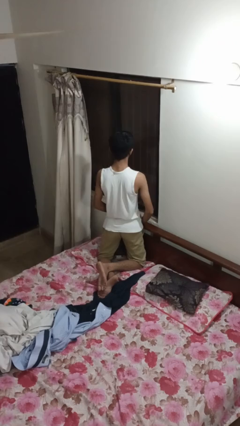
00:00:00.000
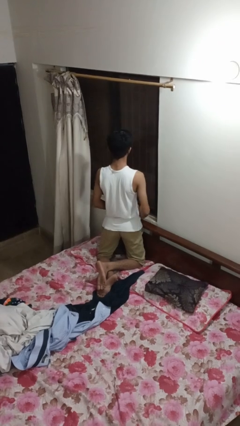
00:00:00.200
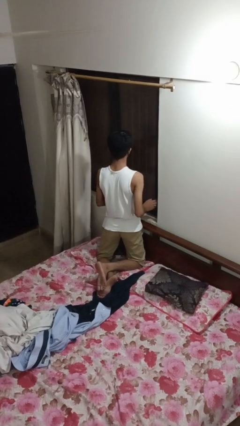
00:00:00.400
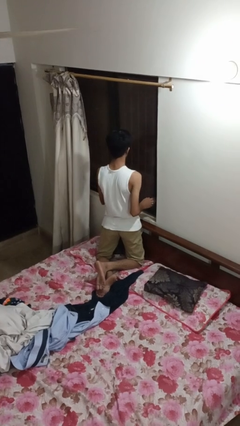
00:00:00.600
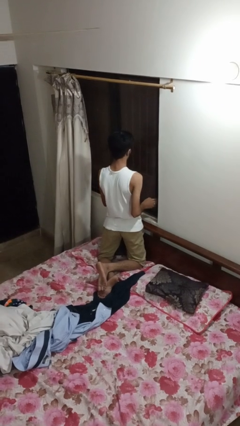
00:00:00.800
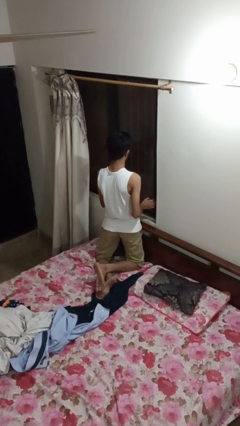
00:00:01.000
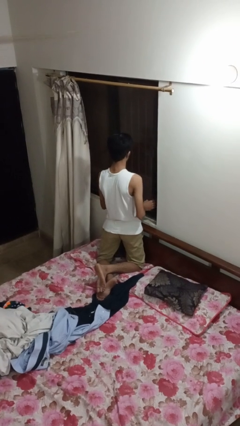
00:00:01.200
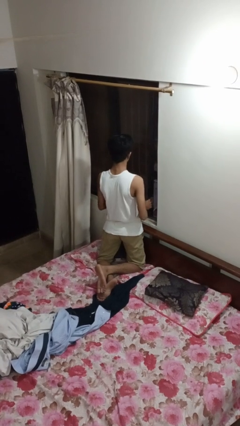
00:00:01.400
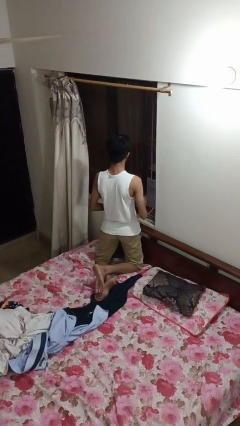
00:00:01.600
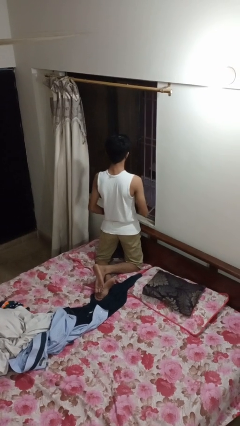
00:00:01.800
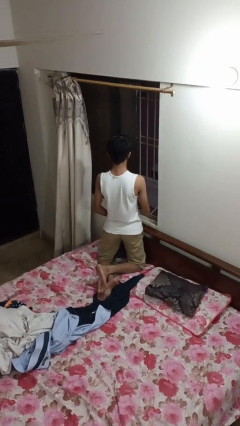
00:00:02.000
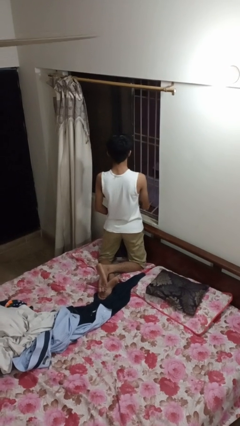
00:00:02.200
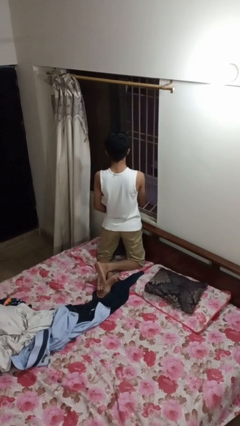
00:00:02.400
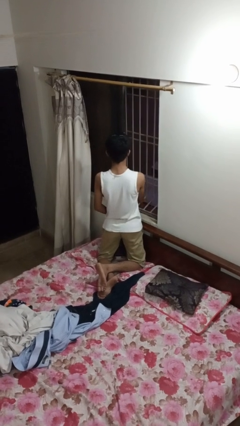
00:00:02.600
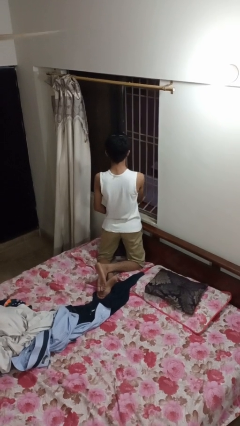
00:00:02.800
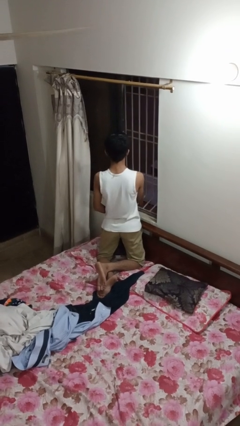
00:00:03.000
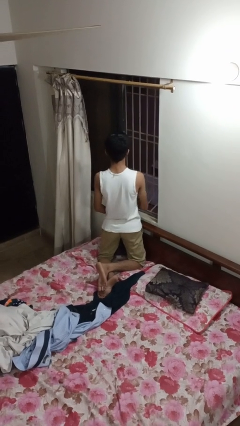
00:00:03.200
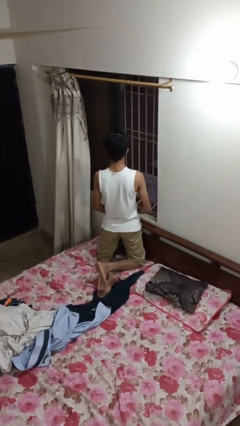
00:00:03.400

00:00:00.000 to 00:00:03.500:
person opens home window

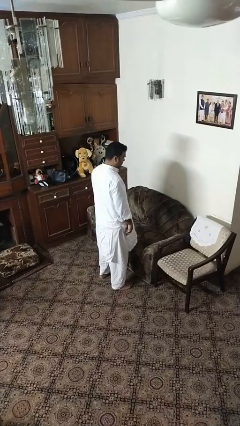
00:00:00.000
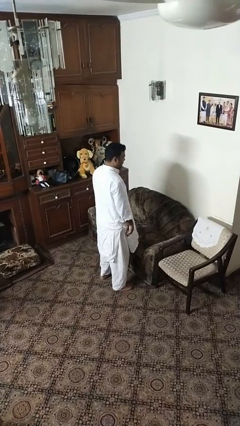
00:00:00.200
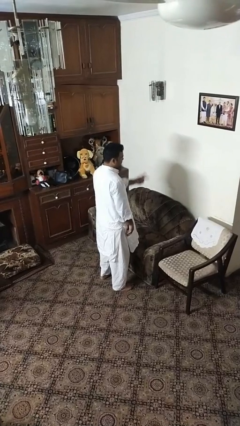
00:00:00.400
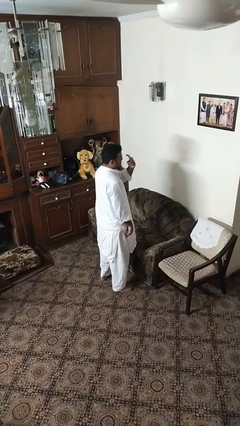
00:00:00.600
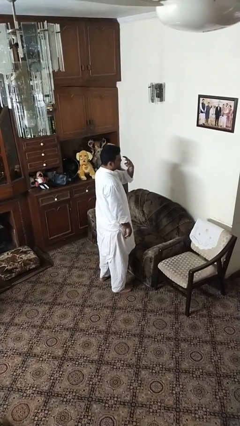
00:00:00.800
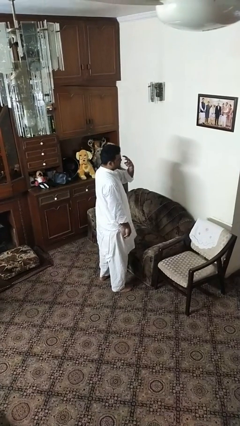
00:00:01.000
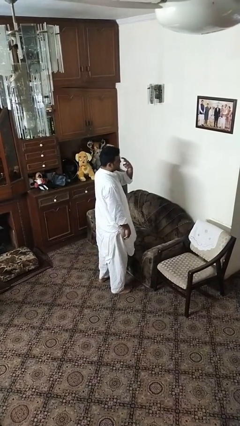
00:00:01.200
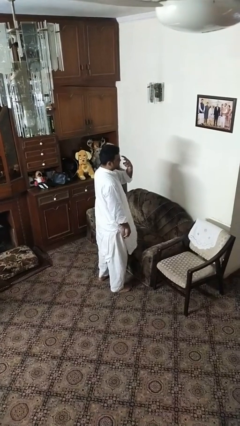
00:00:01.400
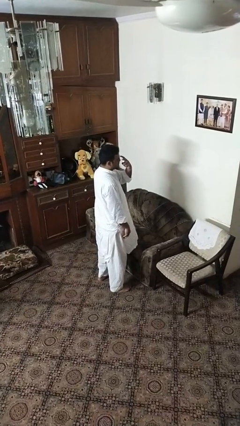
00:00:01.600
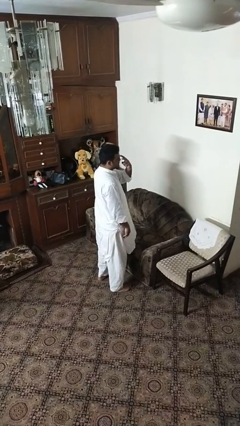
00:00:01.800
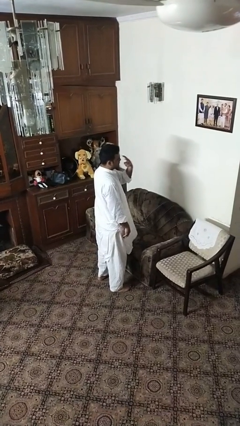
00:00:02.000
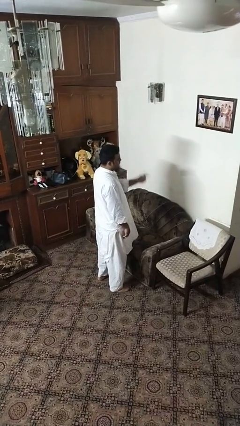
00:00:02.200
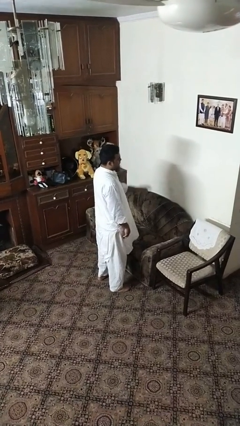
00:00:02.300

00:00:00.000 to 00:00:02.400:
person gestures watch closely

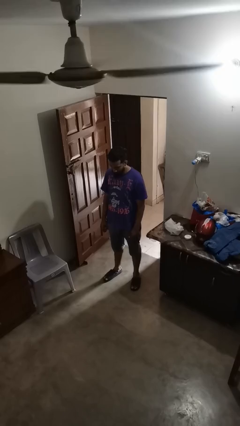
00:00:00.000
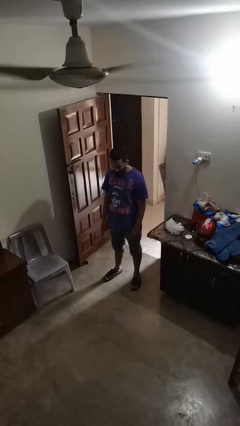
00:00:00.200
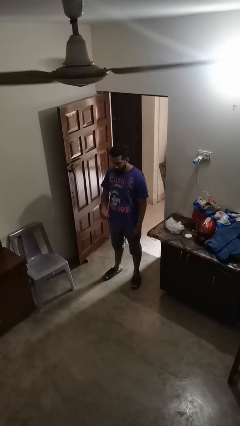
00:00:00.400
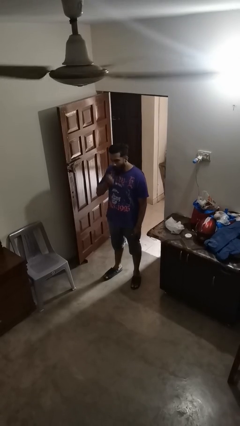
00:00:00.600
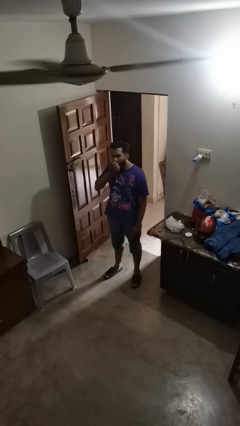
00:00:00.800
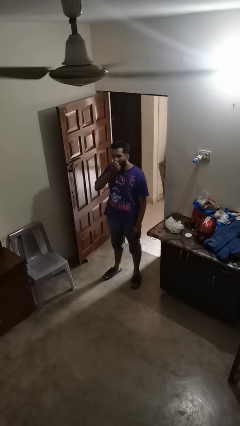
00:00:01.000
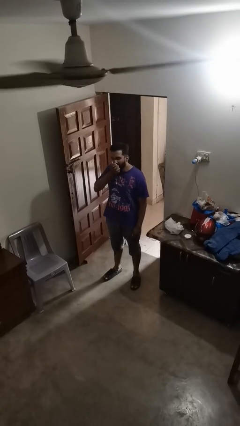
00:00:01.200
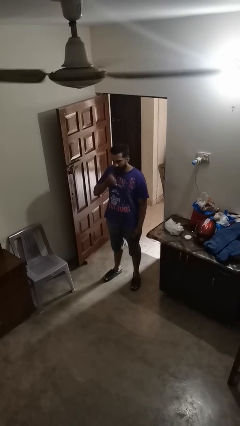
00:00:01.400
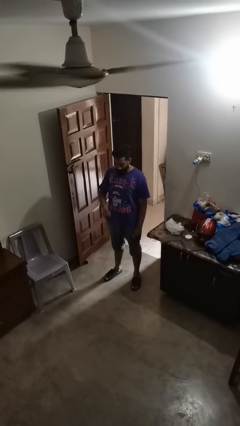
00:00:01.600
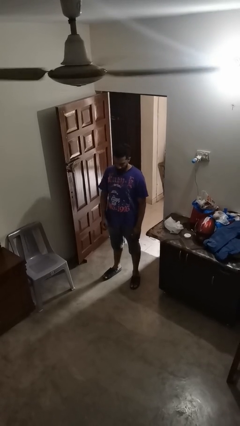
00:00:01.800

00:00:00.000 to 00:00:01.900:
person eats apple

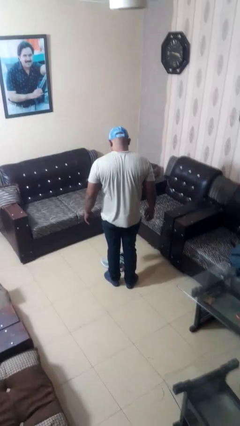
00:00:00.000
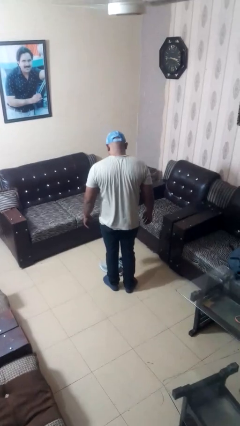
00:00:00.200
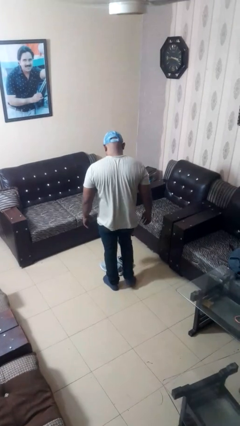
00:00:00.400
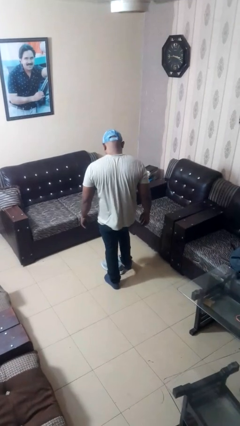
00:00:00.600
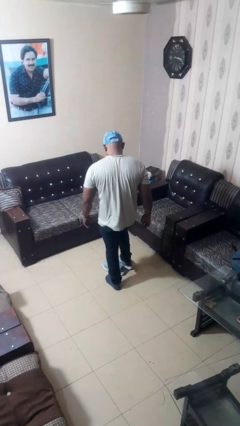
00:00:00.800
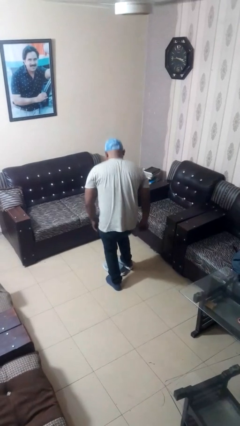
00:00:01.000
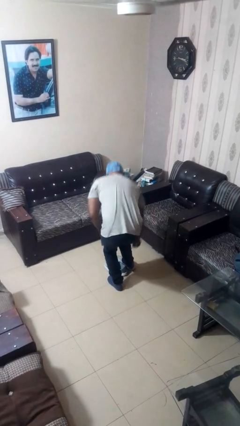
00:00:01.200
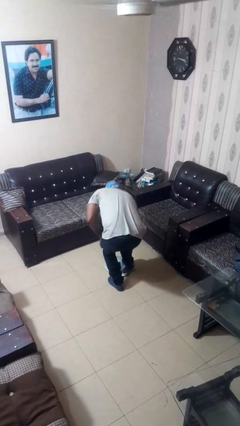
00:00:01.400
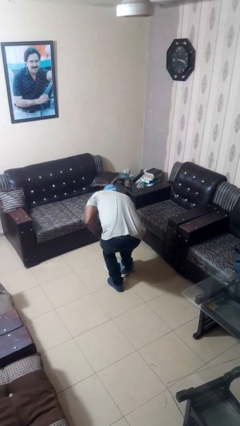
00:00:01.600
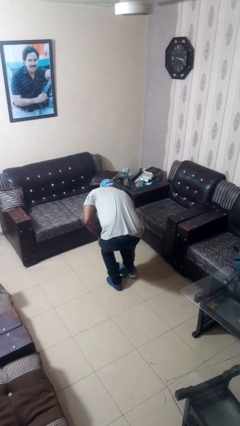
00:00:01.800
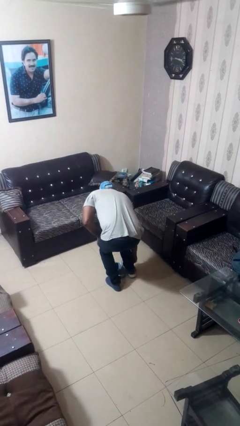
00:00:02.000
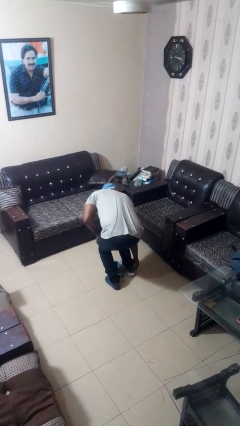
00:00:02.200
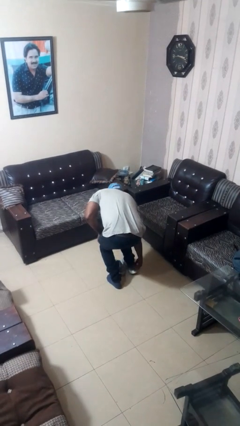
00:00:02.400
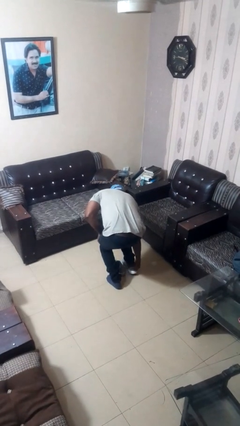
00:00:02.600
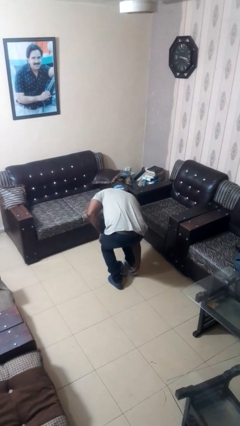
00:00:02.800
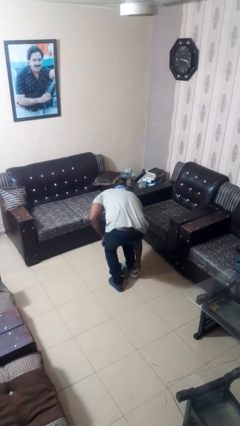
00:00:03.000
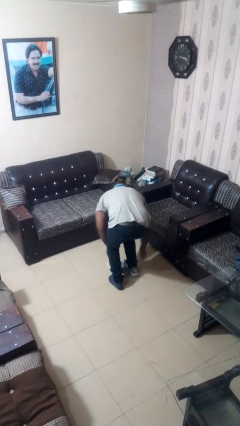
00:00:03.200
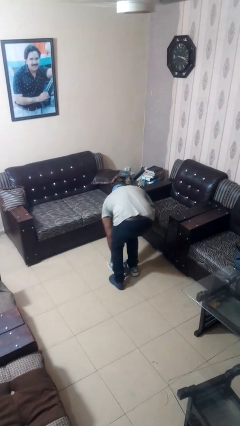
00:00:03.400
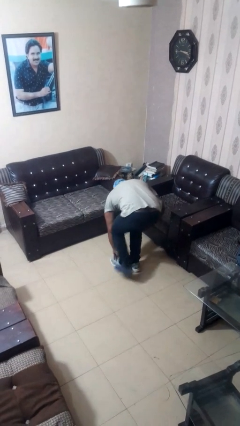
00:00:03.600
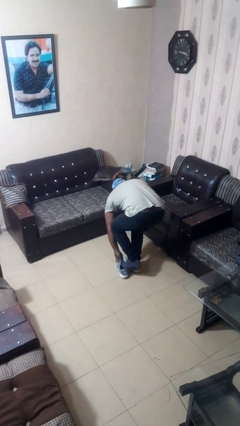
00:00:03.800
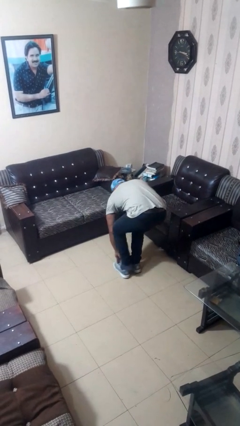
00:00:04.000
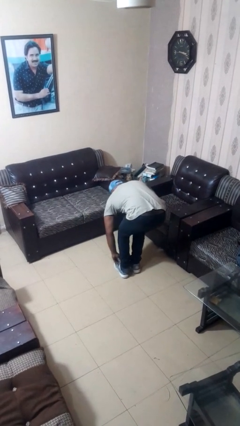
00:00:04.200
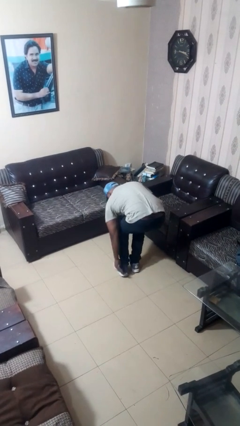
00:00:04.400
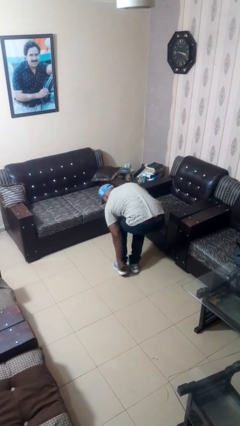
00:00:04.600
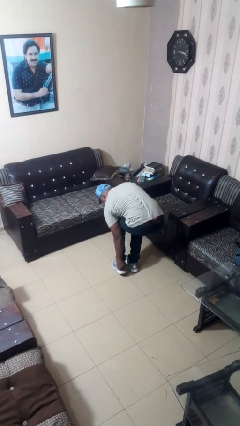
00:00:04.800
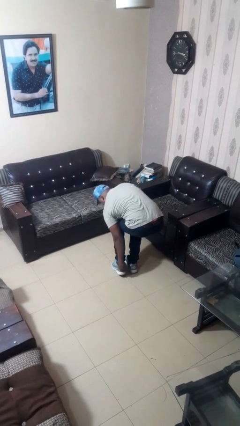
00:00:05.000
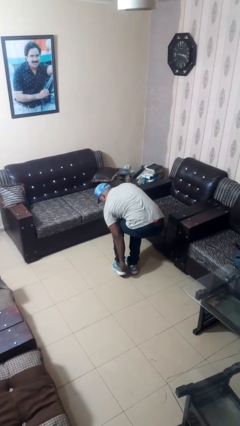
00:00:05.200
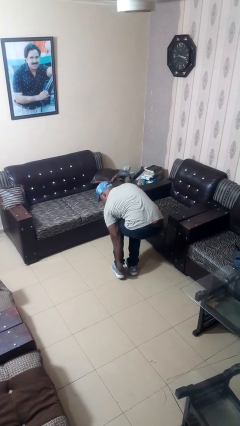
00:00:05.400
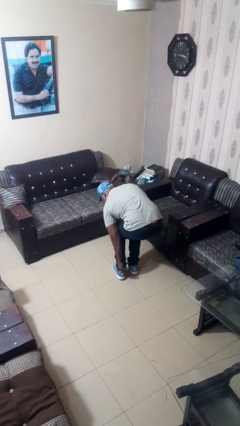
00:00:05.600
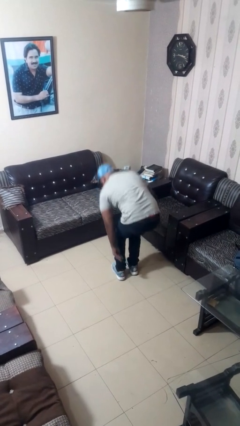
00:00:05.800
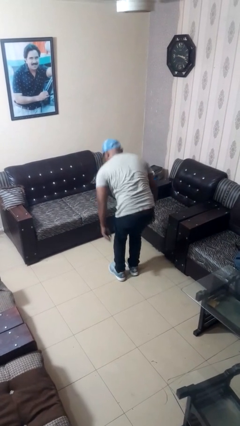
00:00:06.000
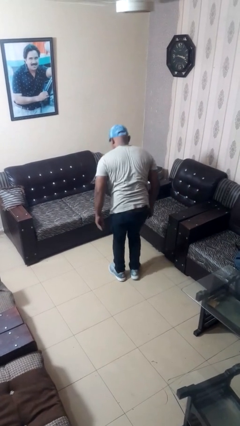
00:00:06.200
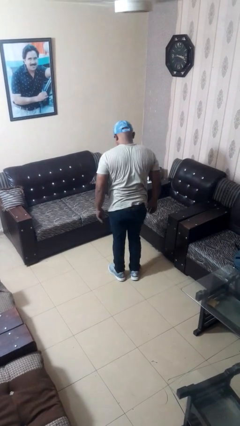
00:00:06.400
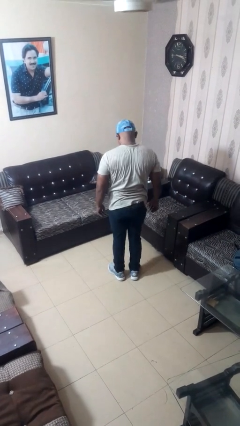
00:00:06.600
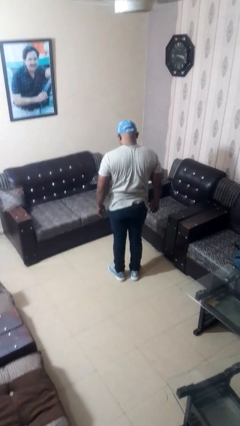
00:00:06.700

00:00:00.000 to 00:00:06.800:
person puts on shoes

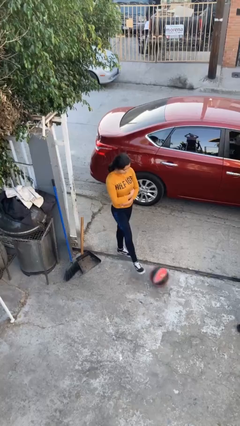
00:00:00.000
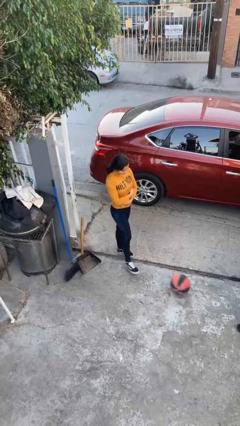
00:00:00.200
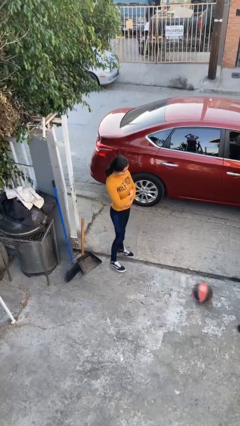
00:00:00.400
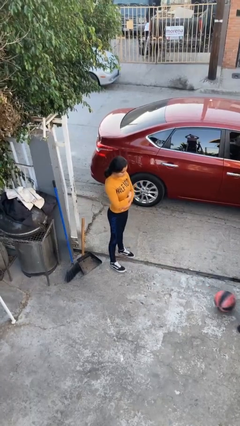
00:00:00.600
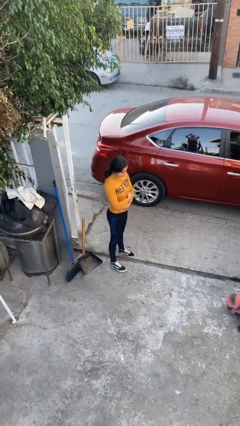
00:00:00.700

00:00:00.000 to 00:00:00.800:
person kicks object to person

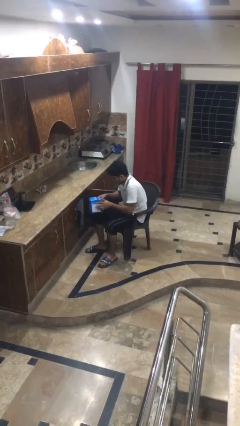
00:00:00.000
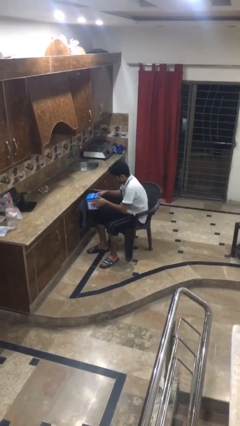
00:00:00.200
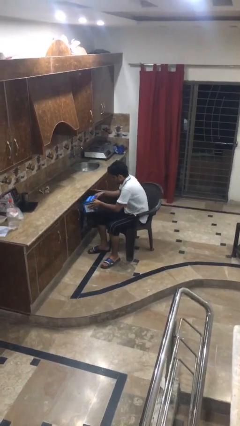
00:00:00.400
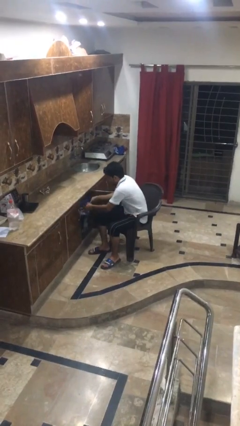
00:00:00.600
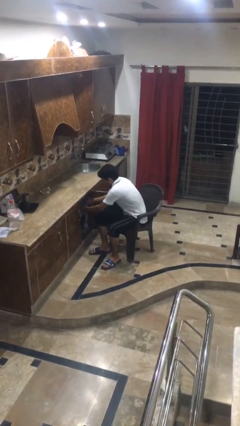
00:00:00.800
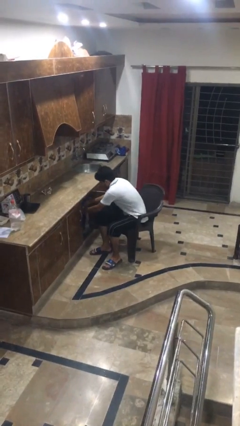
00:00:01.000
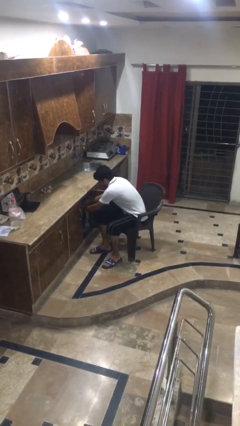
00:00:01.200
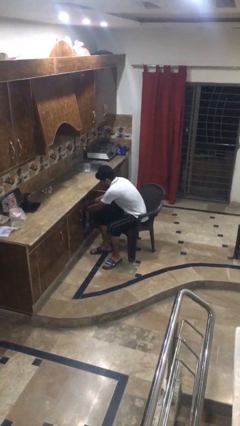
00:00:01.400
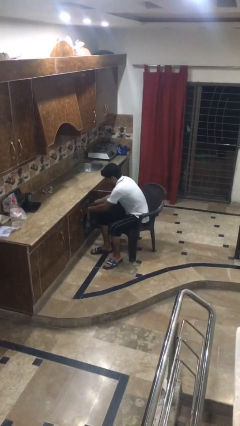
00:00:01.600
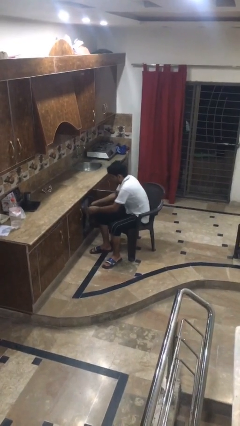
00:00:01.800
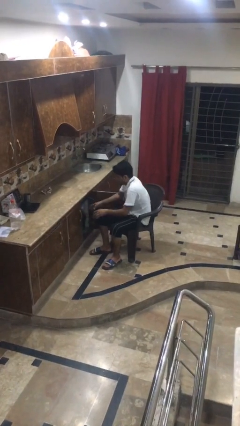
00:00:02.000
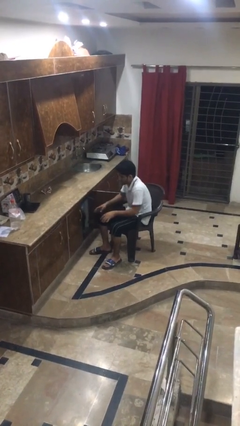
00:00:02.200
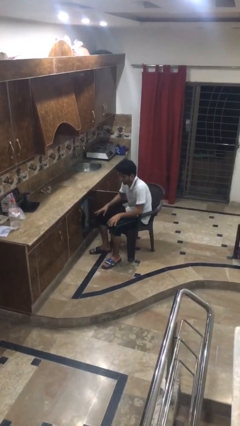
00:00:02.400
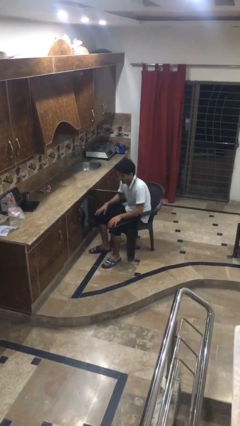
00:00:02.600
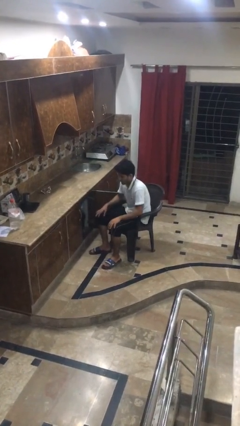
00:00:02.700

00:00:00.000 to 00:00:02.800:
person puts down object into cabinet
